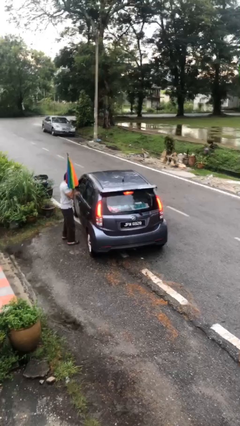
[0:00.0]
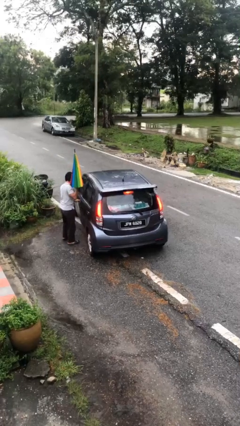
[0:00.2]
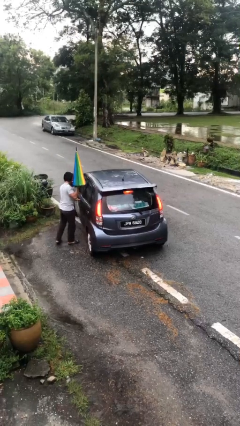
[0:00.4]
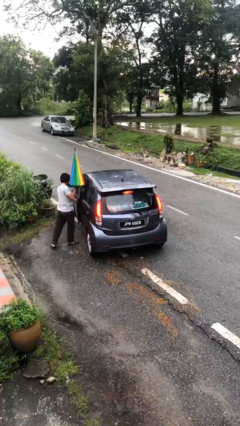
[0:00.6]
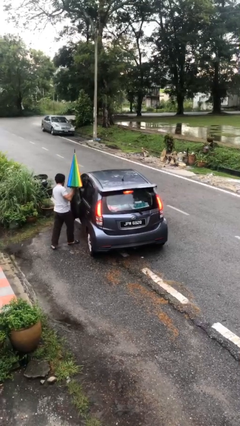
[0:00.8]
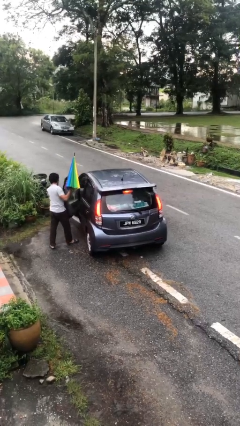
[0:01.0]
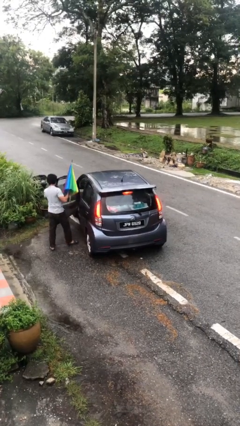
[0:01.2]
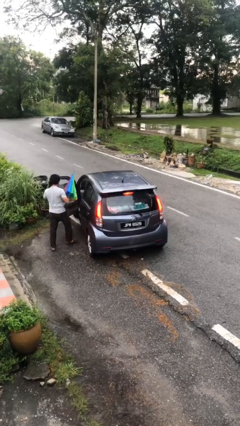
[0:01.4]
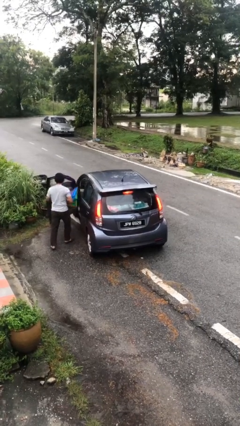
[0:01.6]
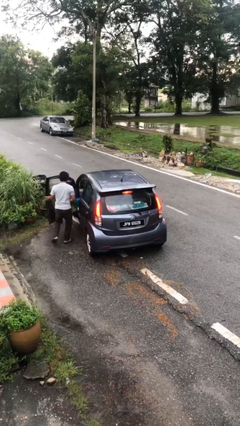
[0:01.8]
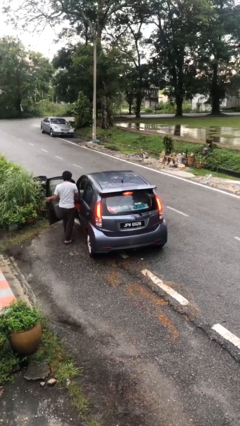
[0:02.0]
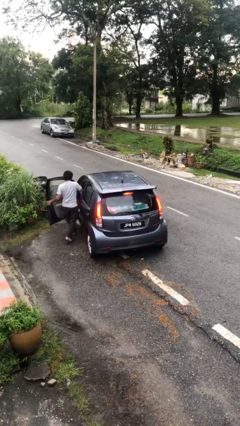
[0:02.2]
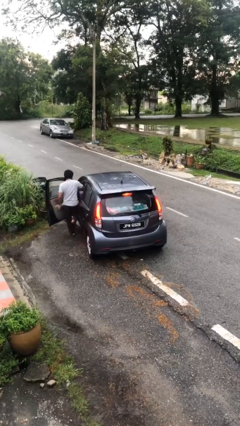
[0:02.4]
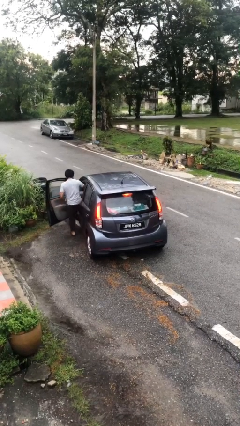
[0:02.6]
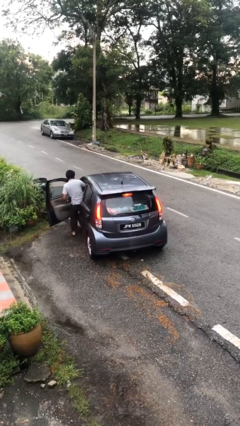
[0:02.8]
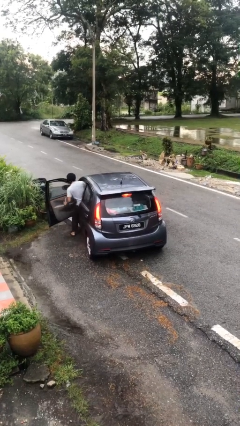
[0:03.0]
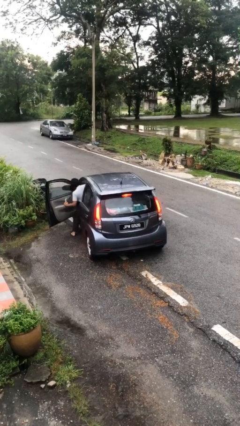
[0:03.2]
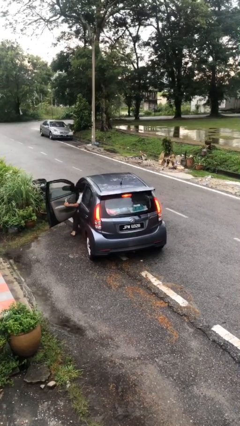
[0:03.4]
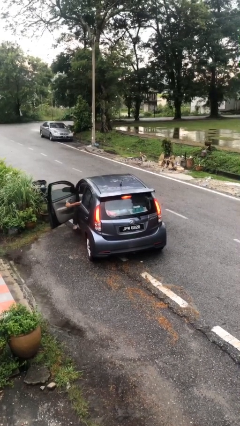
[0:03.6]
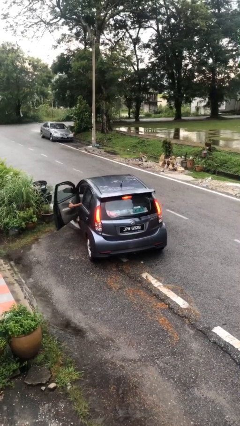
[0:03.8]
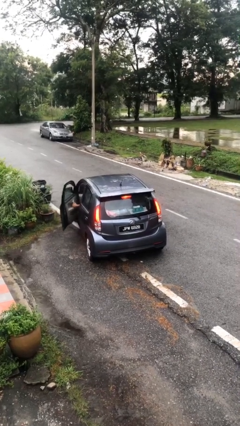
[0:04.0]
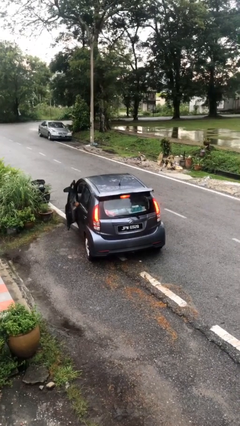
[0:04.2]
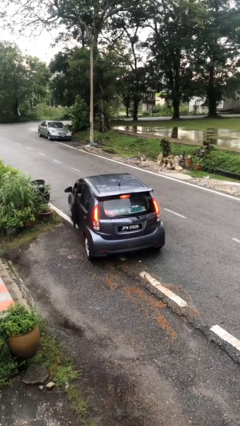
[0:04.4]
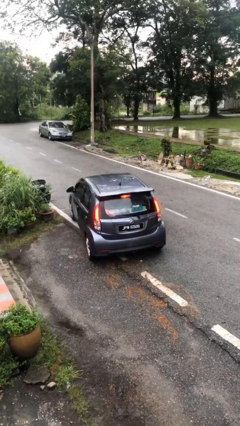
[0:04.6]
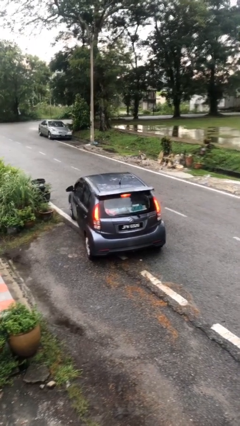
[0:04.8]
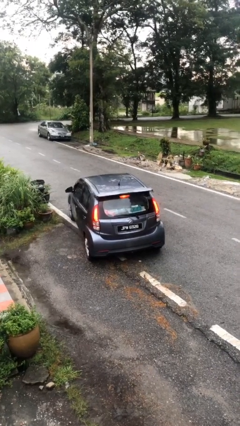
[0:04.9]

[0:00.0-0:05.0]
car picks up person

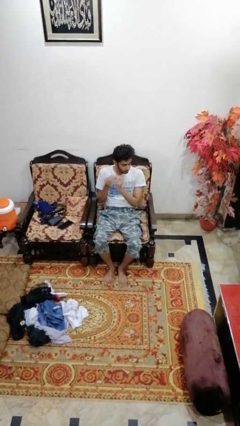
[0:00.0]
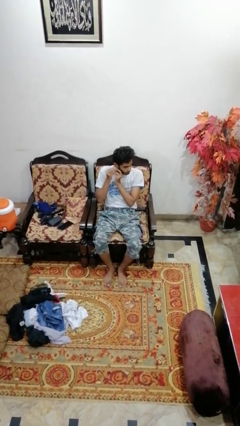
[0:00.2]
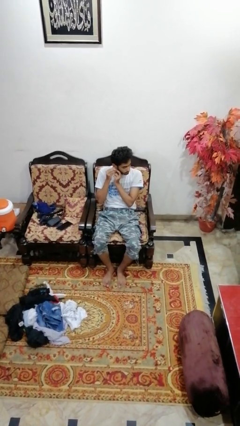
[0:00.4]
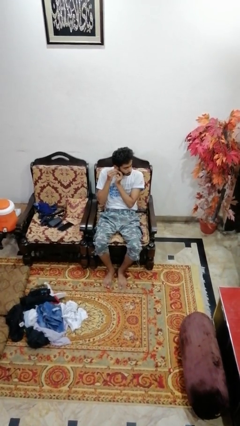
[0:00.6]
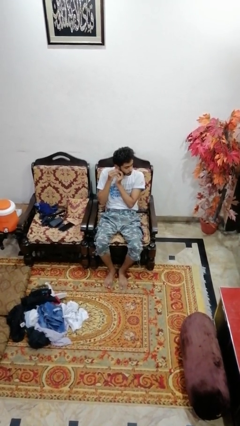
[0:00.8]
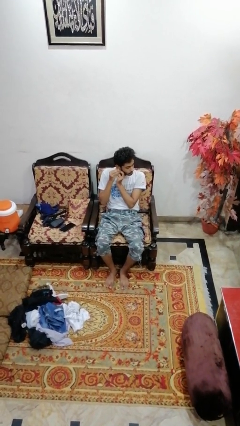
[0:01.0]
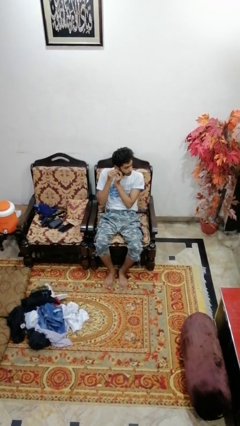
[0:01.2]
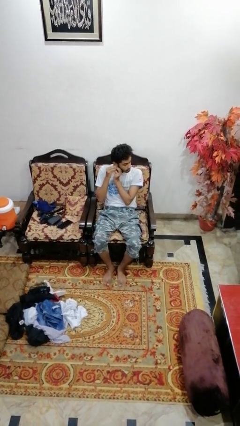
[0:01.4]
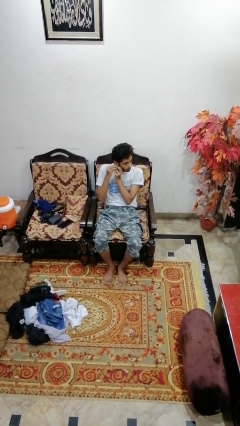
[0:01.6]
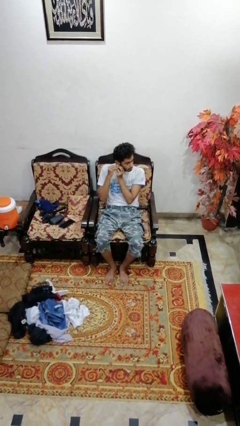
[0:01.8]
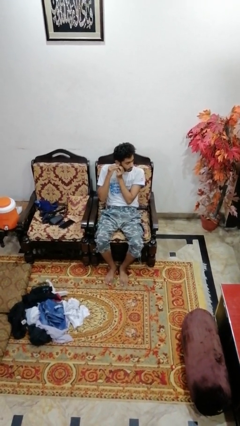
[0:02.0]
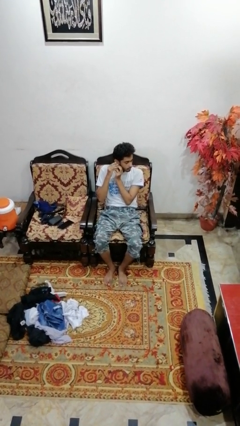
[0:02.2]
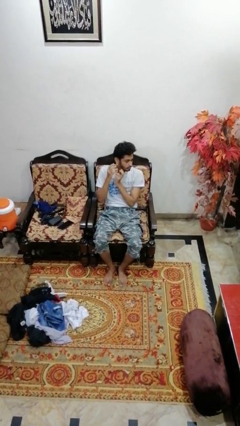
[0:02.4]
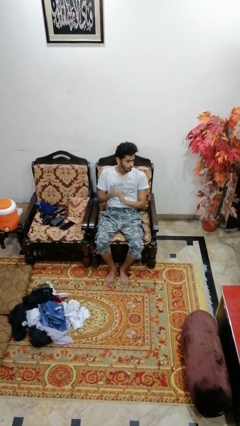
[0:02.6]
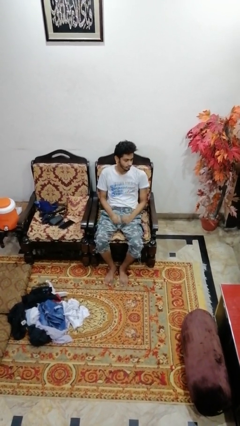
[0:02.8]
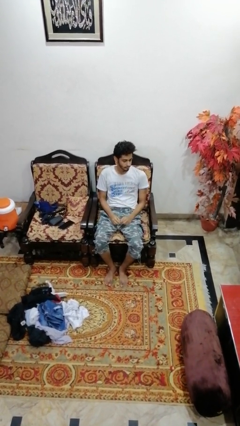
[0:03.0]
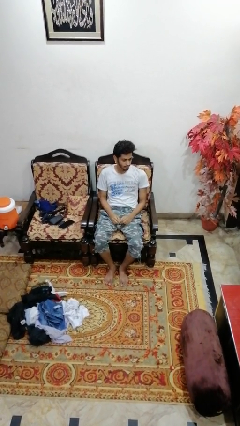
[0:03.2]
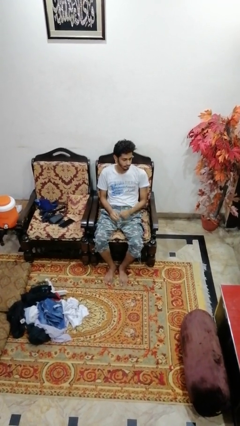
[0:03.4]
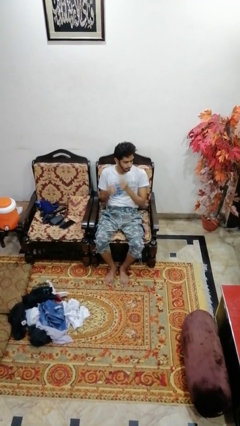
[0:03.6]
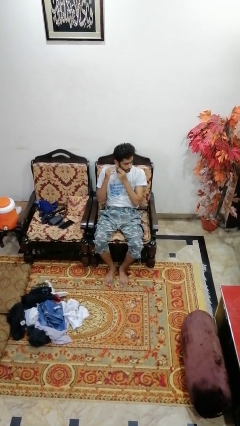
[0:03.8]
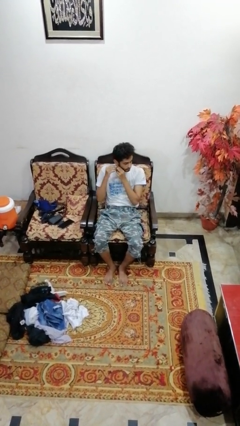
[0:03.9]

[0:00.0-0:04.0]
person puts on earrings

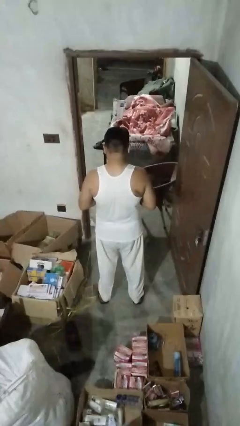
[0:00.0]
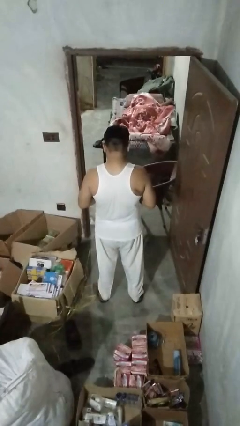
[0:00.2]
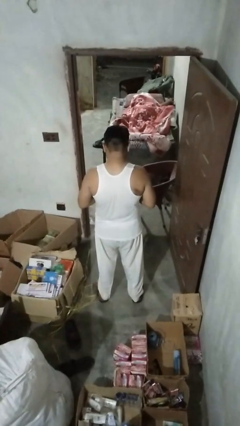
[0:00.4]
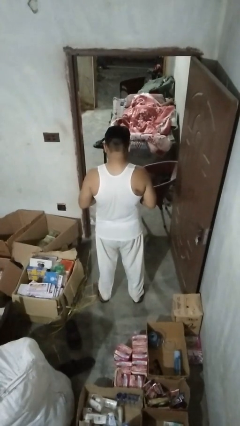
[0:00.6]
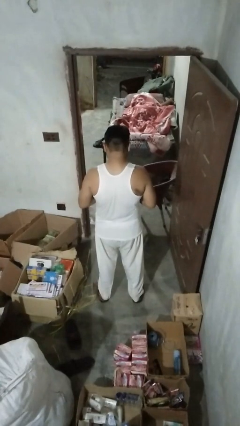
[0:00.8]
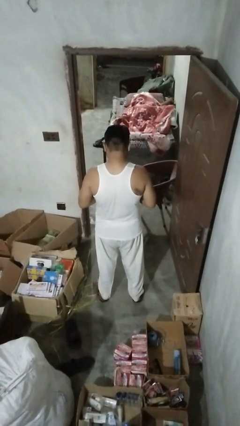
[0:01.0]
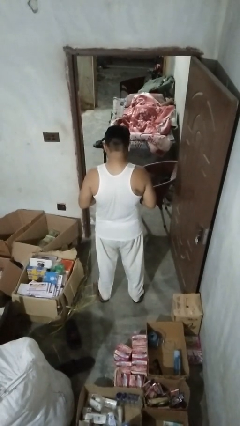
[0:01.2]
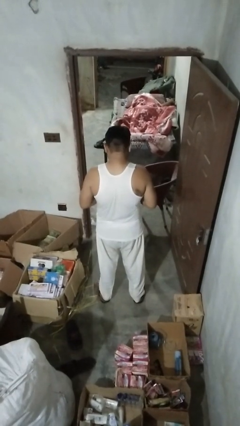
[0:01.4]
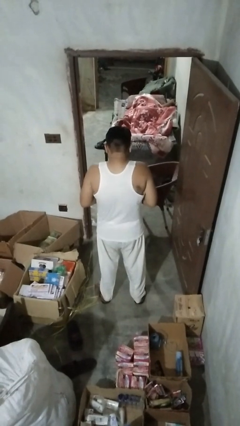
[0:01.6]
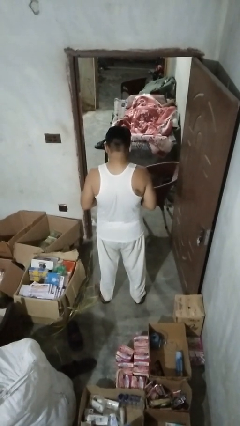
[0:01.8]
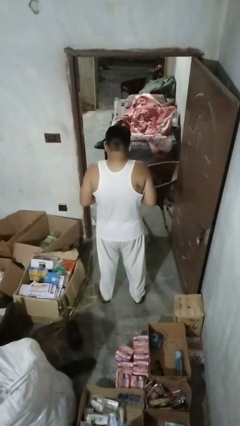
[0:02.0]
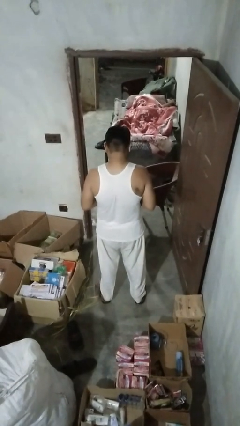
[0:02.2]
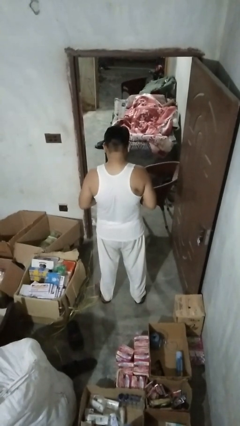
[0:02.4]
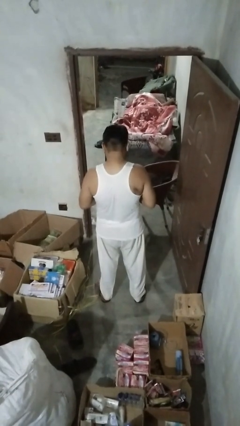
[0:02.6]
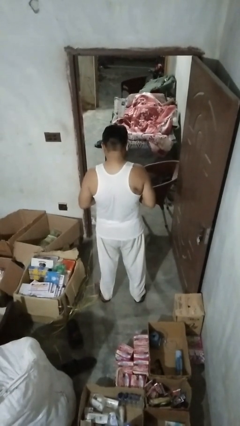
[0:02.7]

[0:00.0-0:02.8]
person shrugs

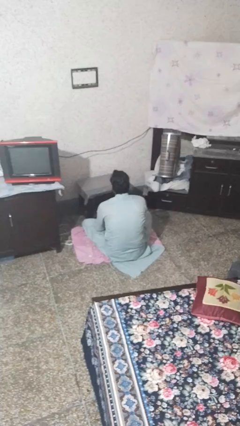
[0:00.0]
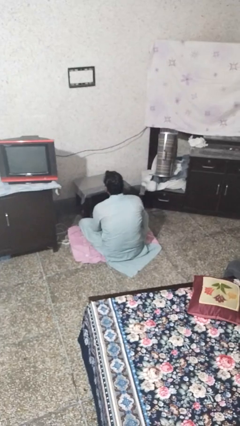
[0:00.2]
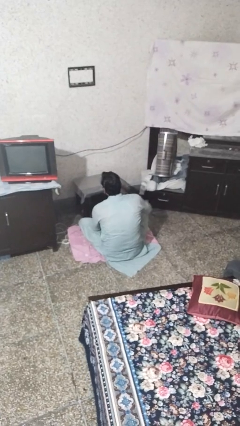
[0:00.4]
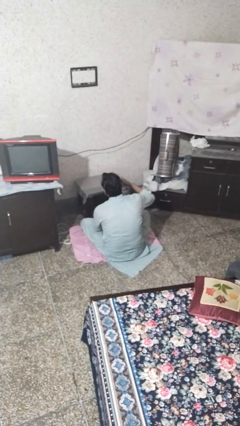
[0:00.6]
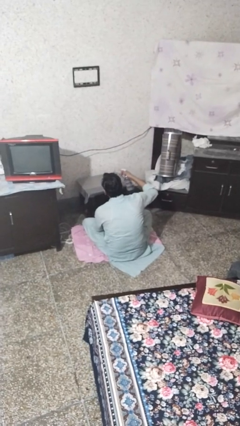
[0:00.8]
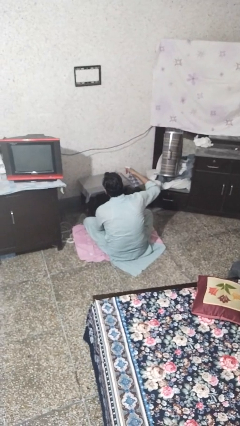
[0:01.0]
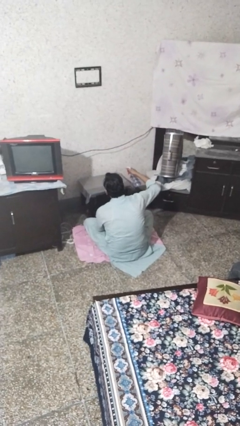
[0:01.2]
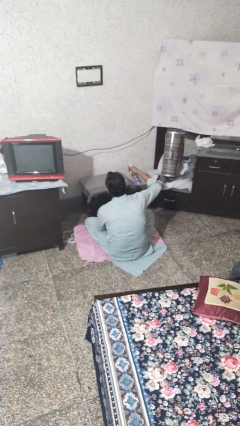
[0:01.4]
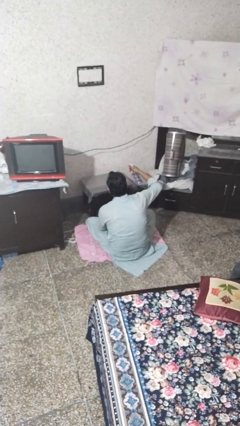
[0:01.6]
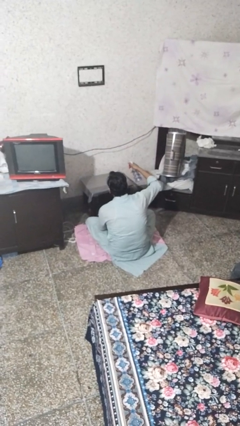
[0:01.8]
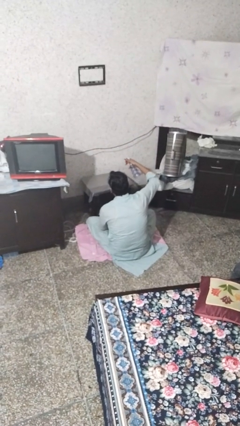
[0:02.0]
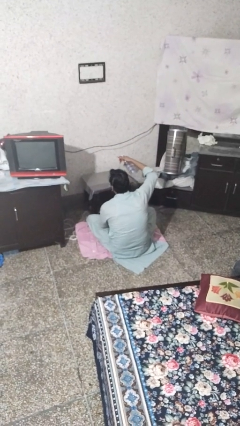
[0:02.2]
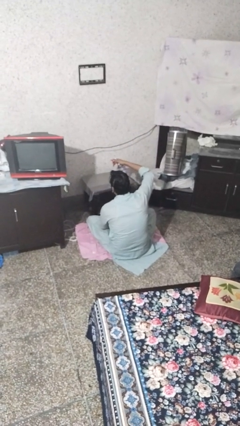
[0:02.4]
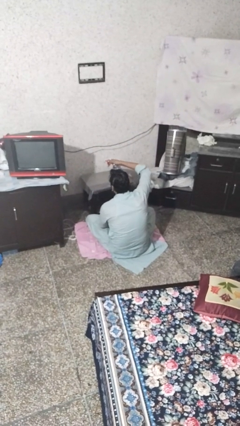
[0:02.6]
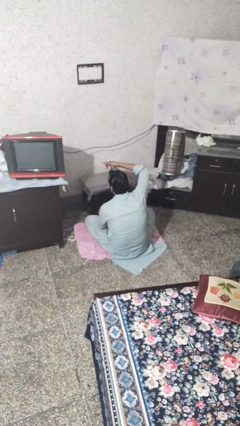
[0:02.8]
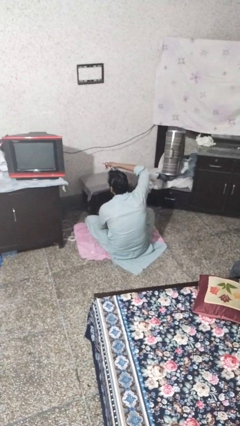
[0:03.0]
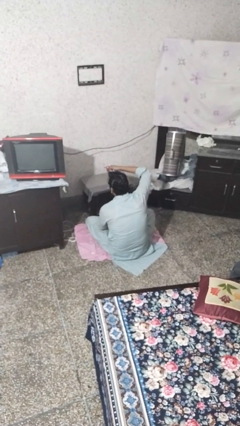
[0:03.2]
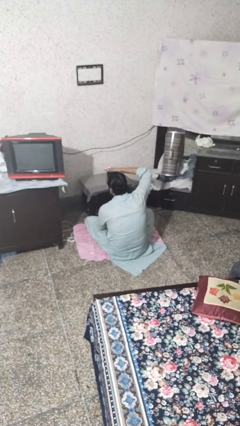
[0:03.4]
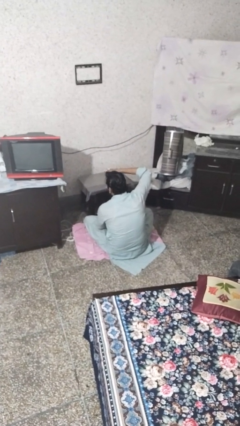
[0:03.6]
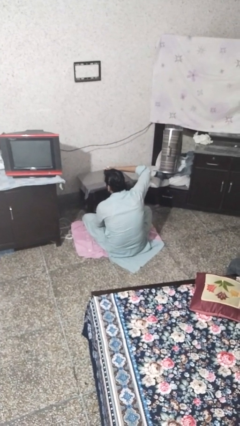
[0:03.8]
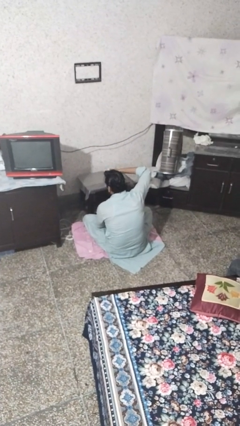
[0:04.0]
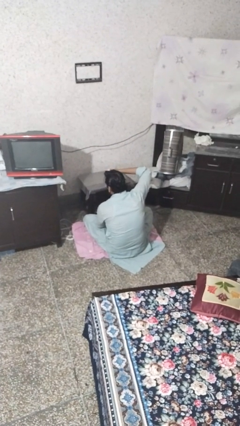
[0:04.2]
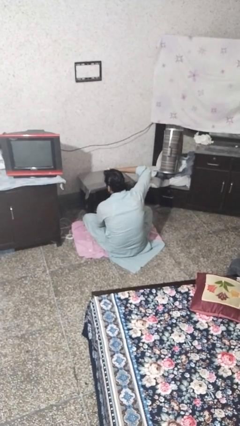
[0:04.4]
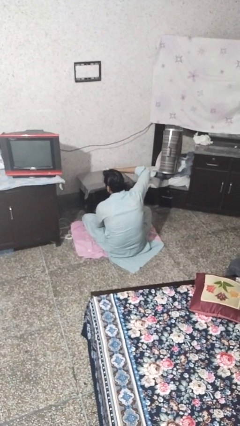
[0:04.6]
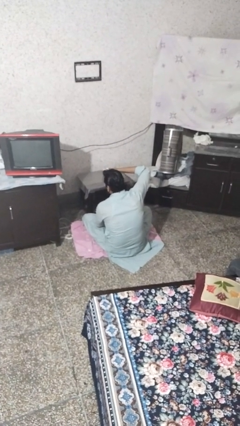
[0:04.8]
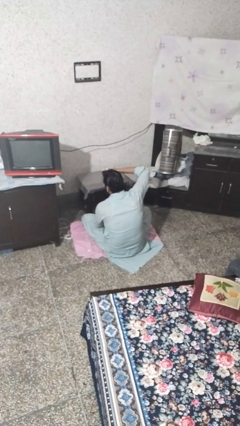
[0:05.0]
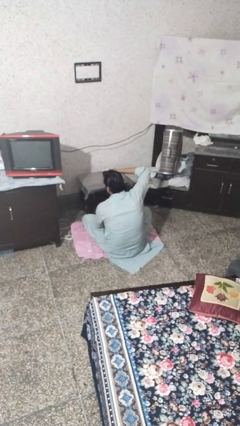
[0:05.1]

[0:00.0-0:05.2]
person sprays from bottle

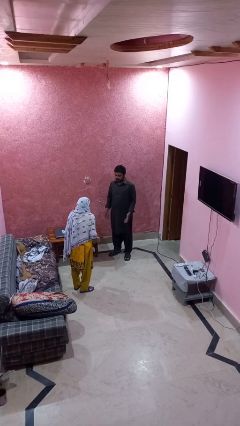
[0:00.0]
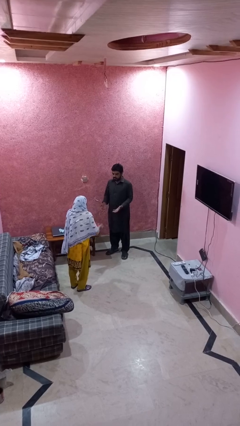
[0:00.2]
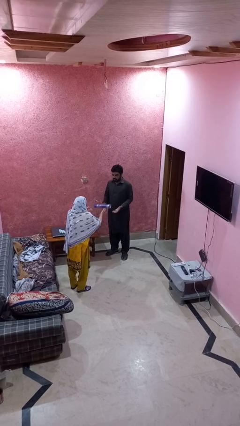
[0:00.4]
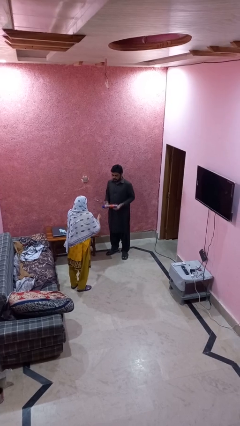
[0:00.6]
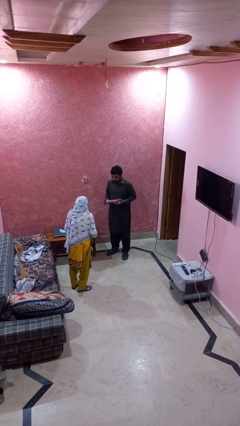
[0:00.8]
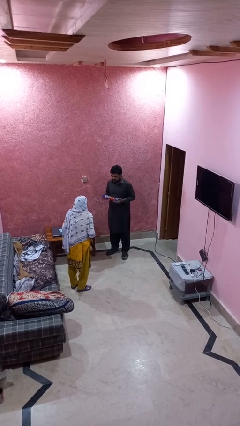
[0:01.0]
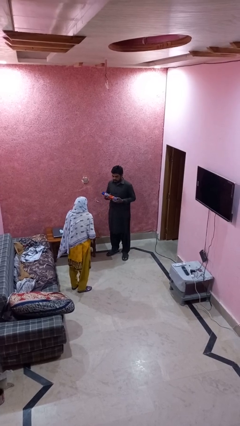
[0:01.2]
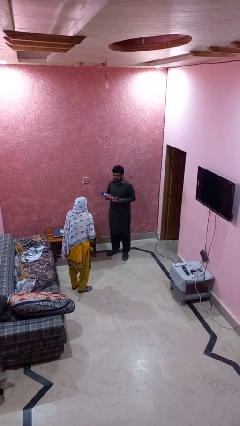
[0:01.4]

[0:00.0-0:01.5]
person catches object from person
